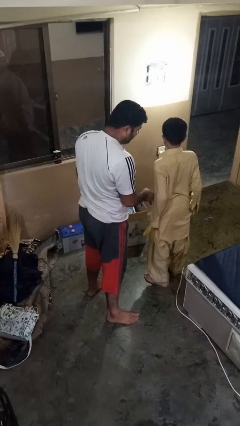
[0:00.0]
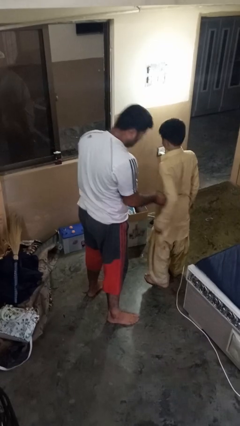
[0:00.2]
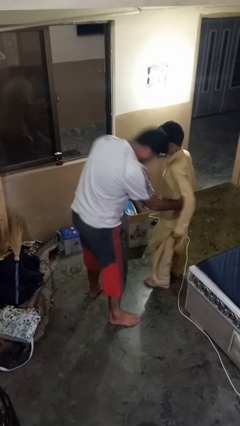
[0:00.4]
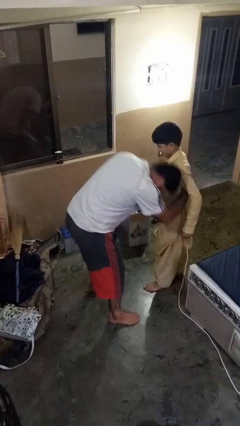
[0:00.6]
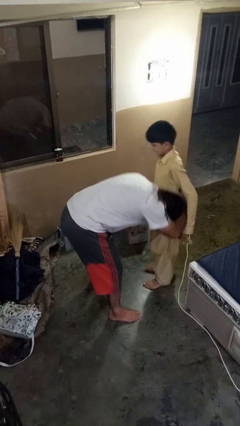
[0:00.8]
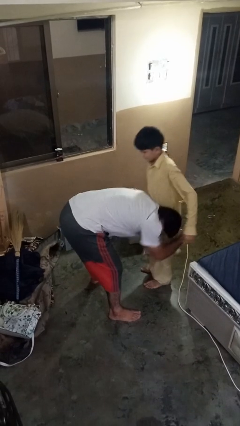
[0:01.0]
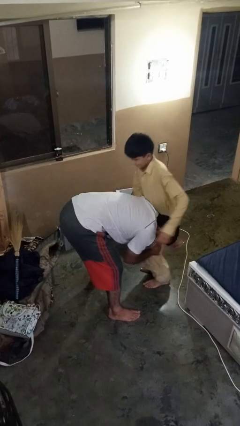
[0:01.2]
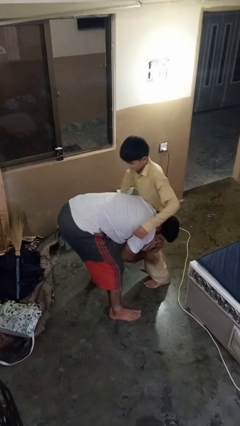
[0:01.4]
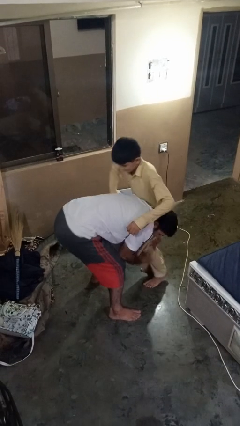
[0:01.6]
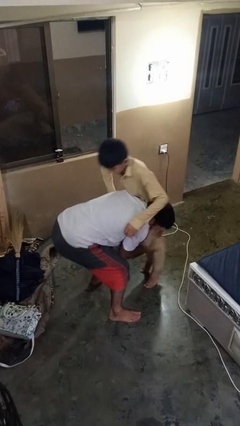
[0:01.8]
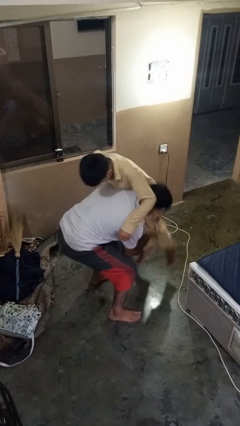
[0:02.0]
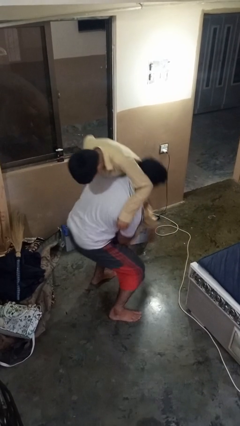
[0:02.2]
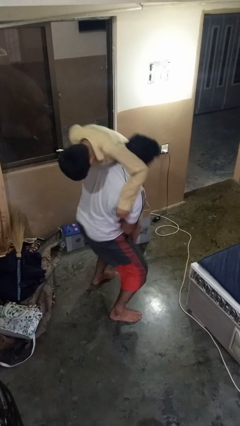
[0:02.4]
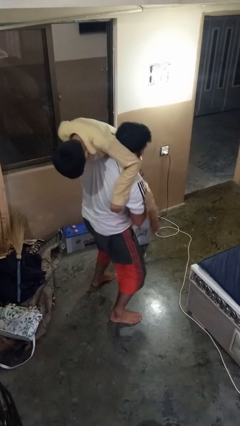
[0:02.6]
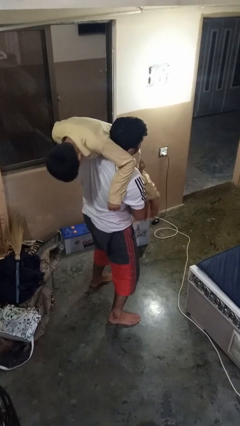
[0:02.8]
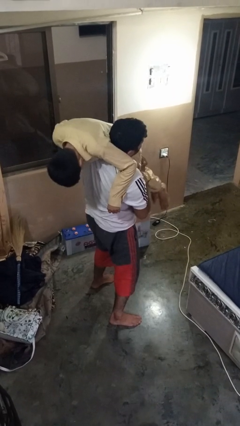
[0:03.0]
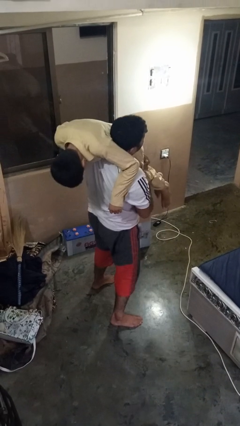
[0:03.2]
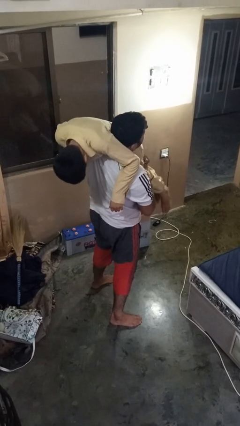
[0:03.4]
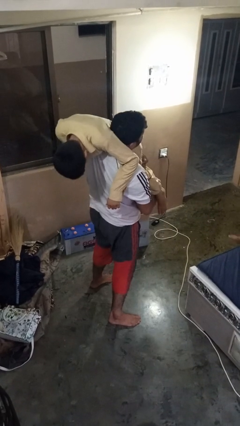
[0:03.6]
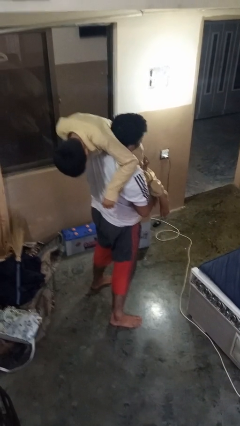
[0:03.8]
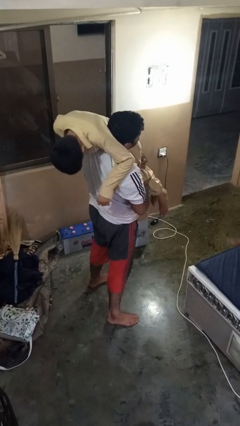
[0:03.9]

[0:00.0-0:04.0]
person carries person over shoulder

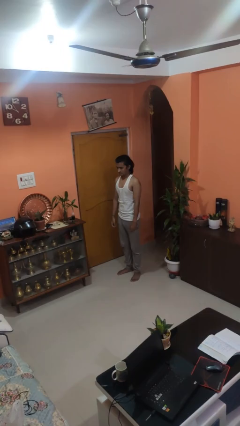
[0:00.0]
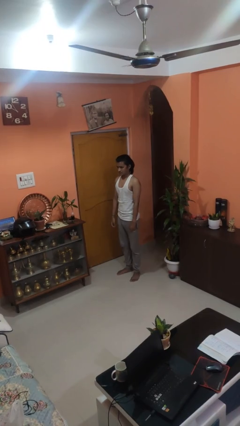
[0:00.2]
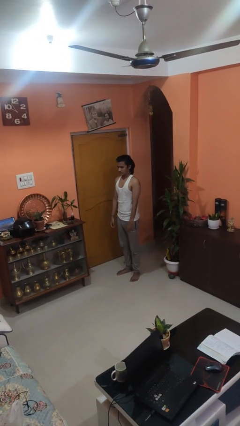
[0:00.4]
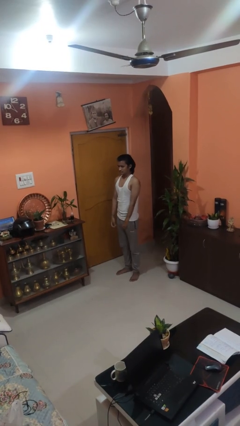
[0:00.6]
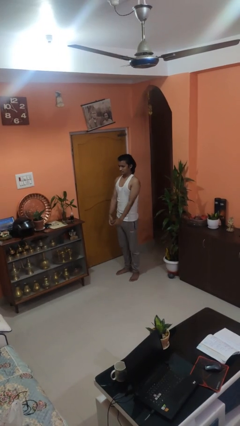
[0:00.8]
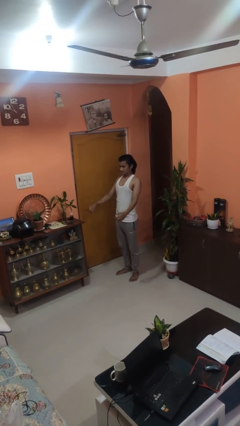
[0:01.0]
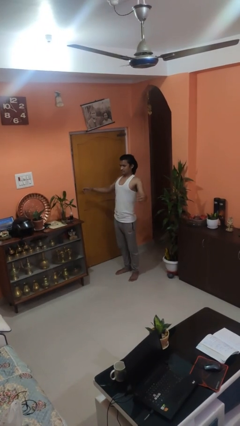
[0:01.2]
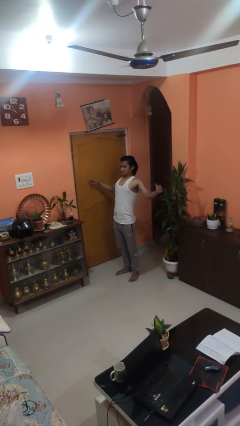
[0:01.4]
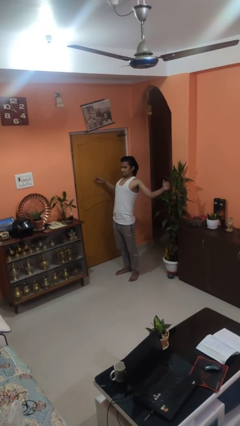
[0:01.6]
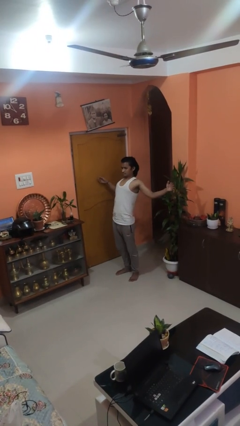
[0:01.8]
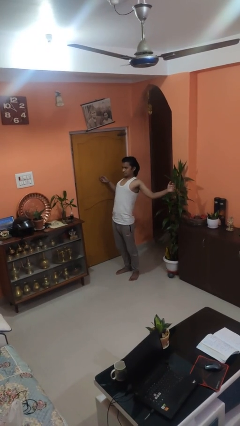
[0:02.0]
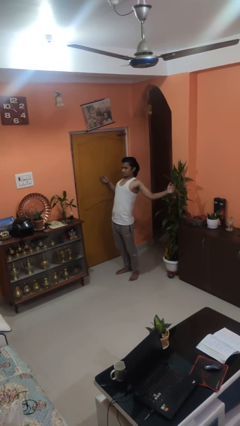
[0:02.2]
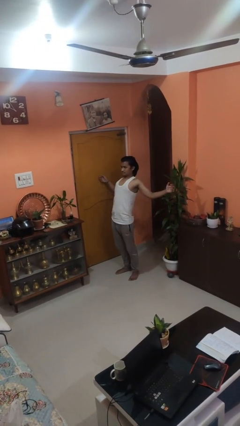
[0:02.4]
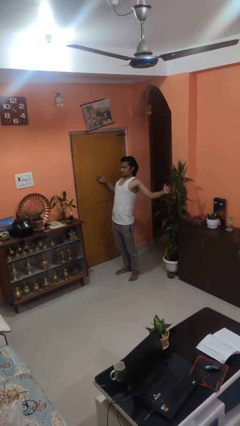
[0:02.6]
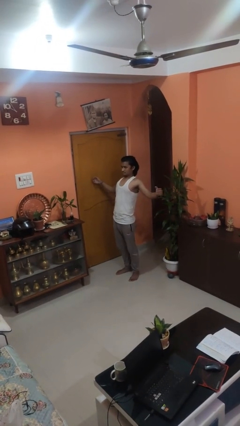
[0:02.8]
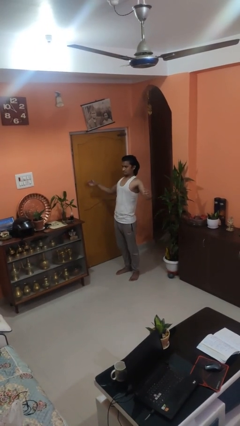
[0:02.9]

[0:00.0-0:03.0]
person stretches arms to side

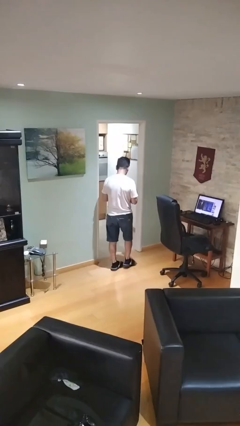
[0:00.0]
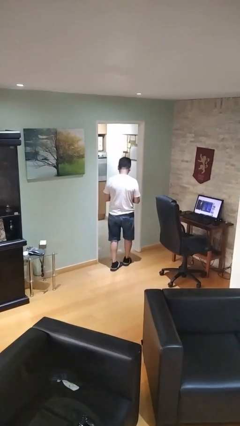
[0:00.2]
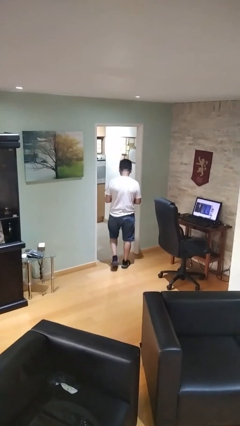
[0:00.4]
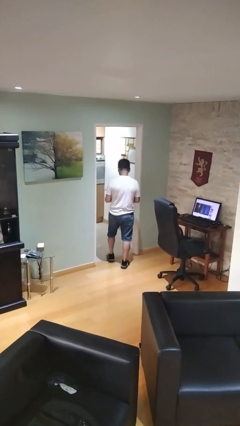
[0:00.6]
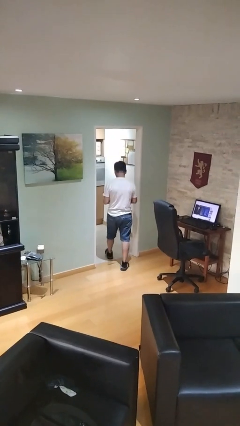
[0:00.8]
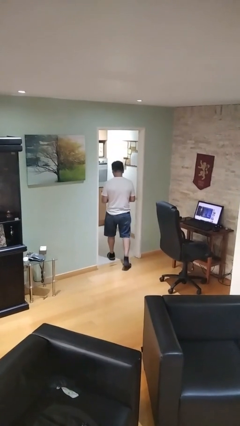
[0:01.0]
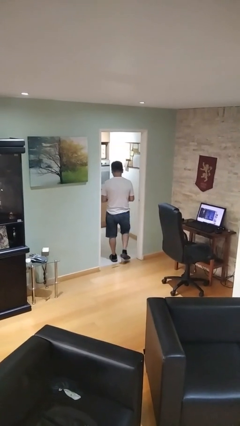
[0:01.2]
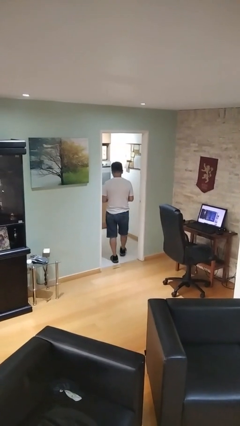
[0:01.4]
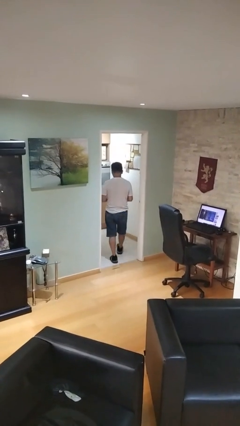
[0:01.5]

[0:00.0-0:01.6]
person exits scene through structure

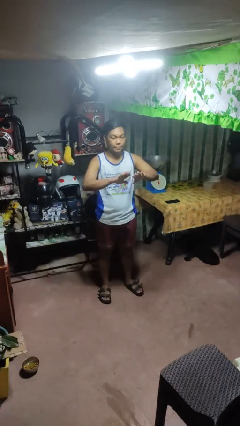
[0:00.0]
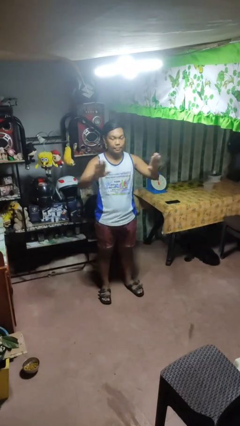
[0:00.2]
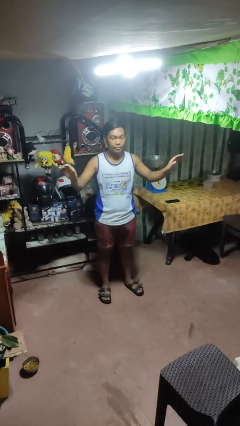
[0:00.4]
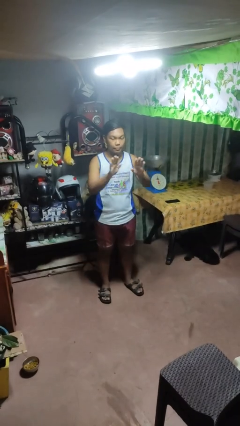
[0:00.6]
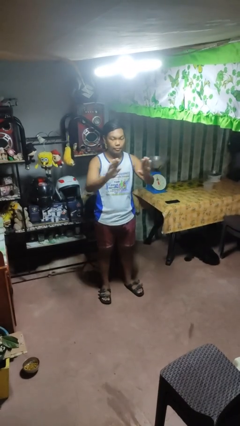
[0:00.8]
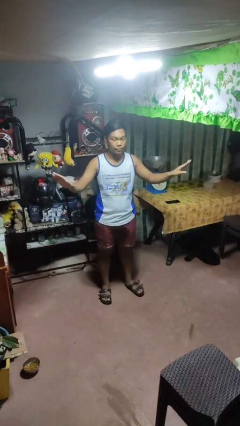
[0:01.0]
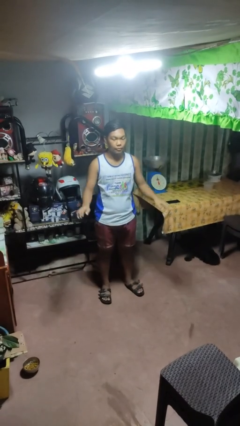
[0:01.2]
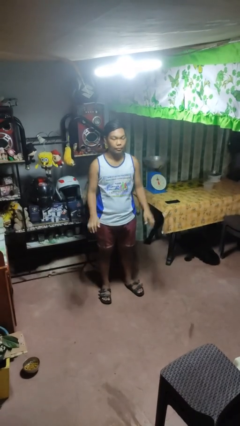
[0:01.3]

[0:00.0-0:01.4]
person gestures zoom in

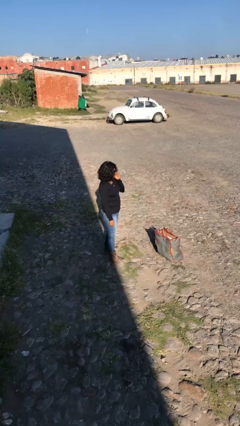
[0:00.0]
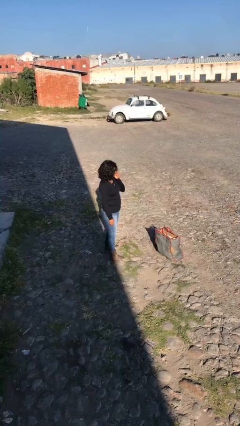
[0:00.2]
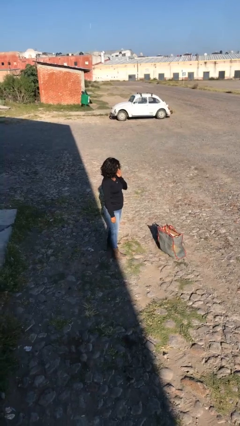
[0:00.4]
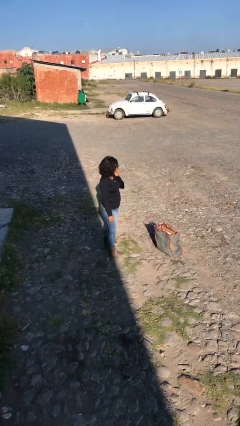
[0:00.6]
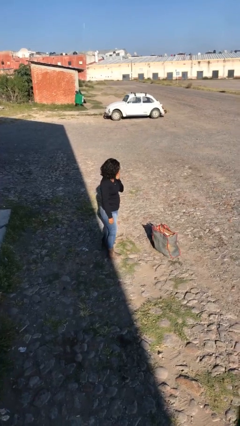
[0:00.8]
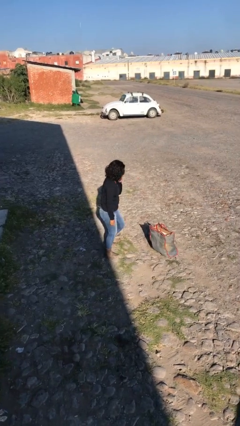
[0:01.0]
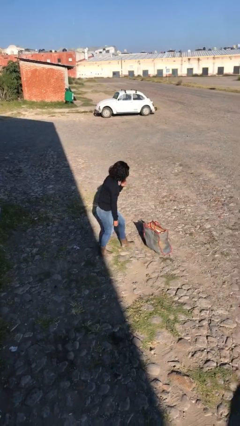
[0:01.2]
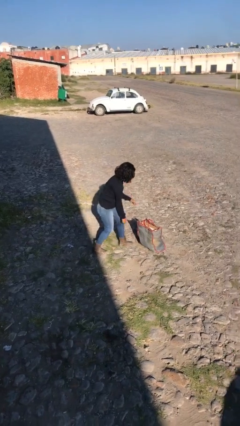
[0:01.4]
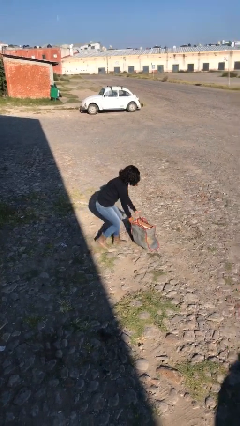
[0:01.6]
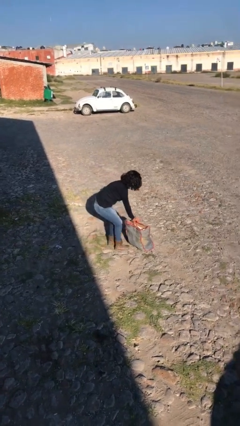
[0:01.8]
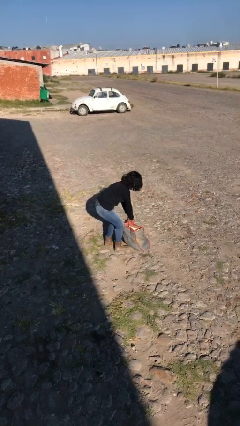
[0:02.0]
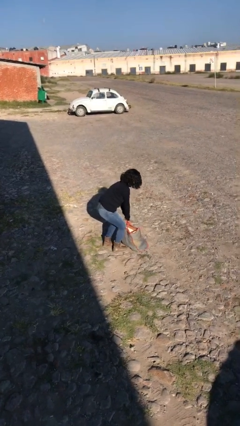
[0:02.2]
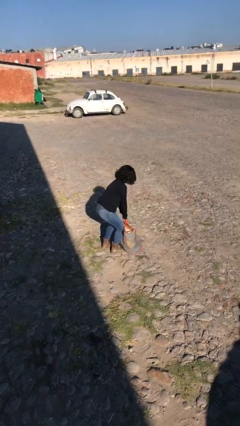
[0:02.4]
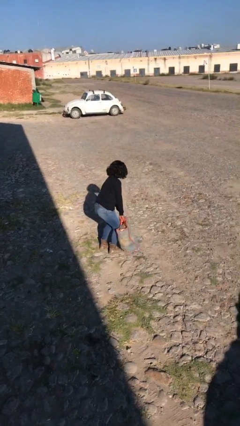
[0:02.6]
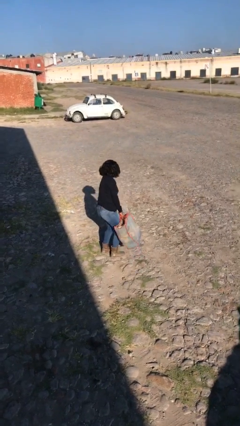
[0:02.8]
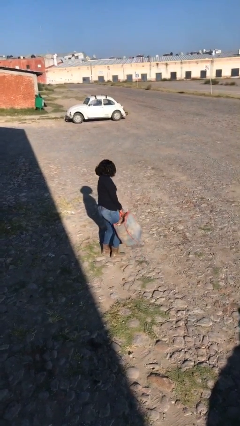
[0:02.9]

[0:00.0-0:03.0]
person picks up object from floor

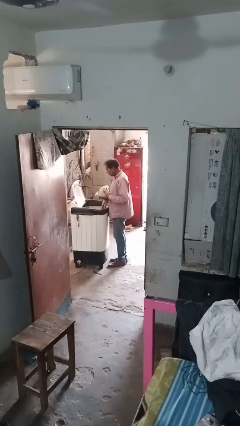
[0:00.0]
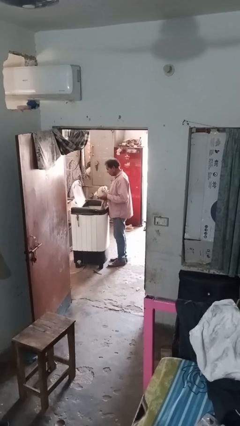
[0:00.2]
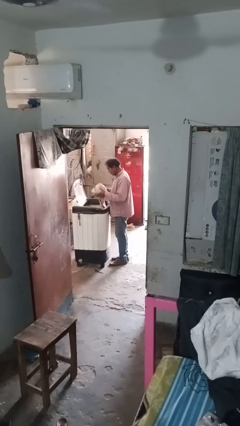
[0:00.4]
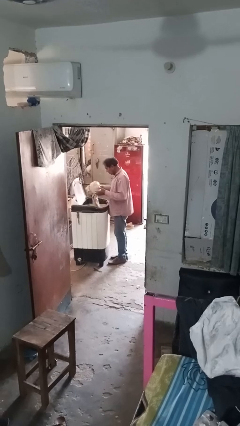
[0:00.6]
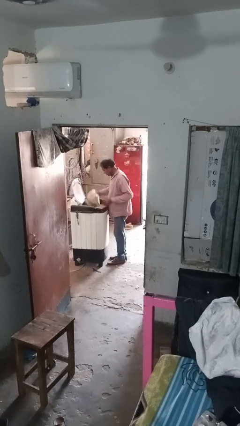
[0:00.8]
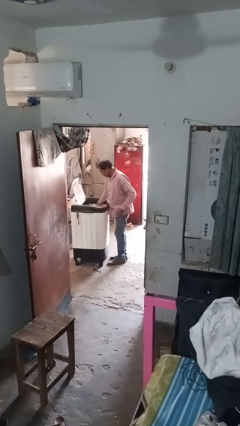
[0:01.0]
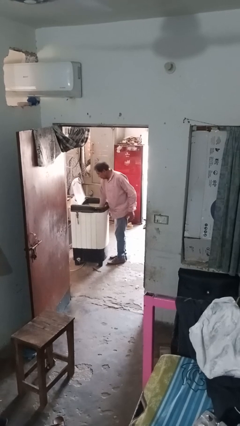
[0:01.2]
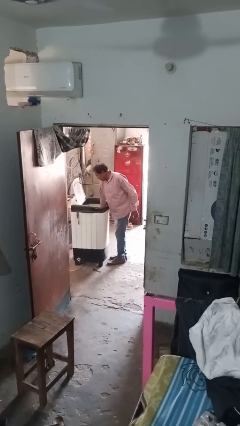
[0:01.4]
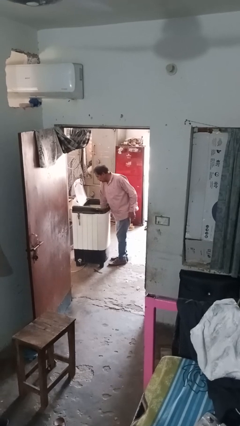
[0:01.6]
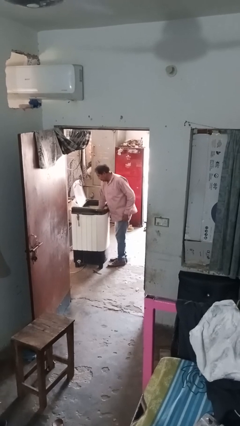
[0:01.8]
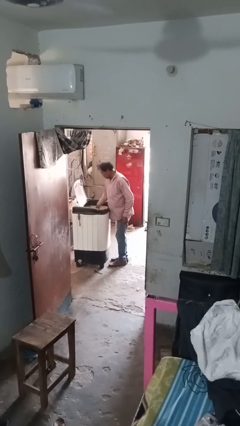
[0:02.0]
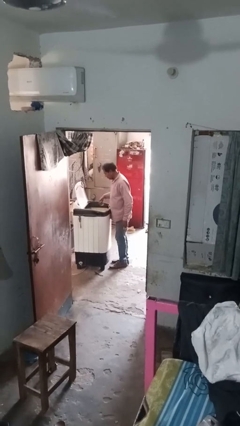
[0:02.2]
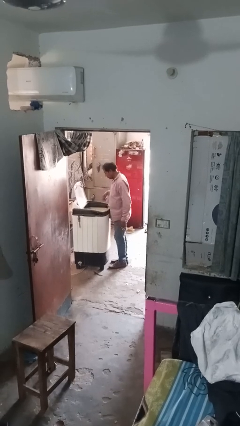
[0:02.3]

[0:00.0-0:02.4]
person loads clotheswasher

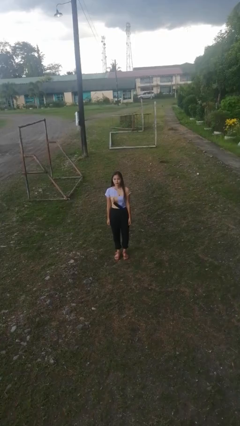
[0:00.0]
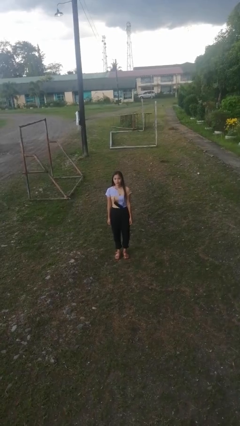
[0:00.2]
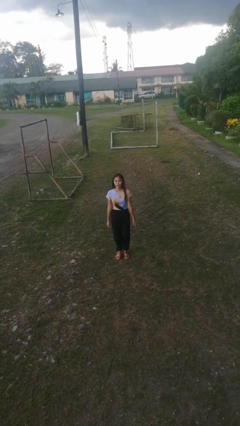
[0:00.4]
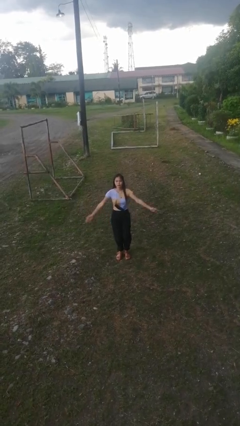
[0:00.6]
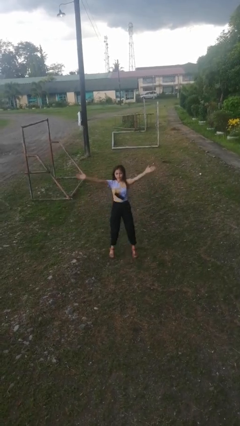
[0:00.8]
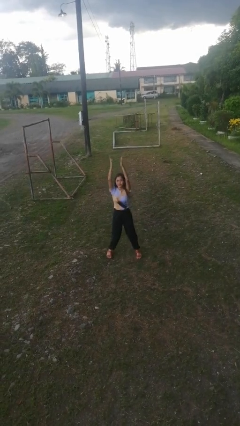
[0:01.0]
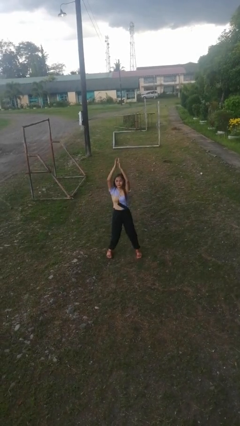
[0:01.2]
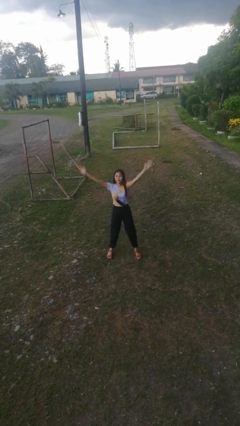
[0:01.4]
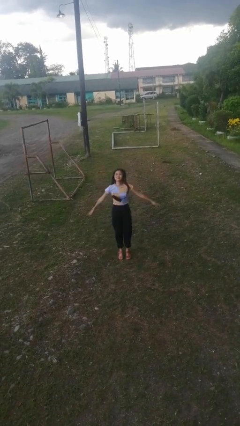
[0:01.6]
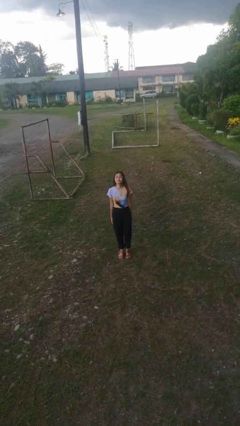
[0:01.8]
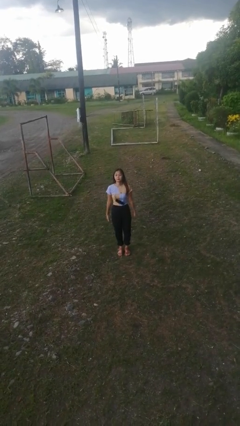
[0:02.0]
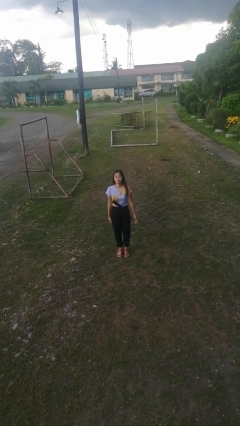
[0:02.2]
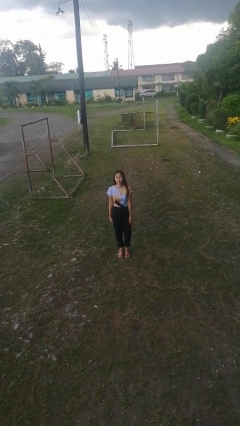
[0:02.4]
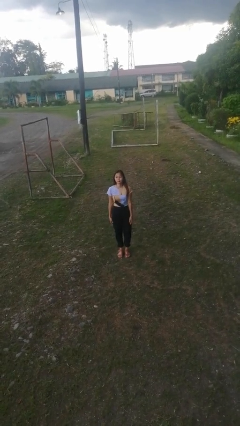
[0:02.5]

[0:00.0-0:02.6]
person exercises with jumping jacks
